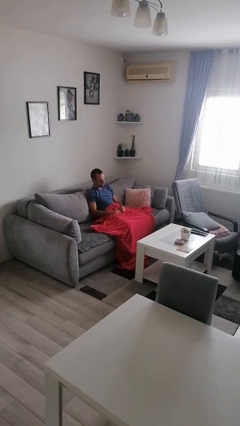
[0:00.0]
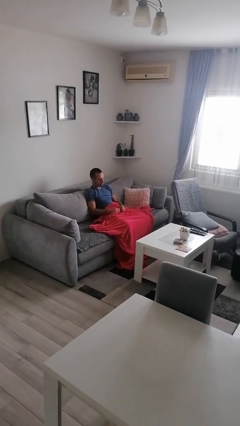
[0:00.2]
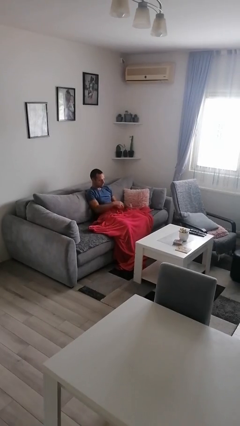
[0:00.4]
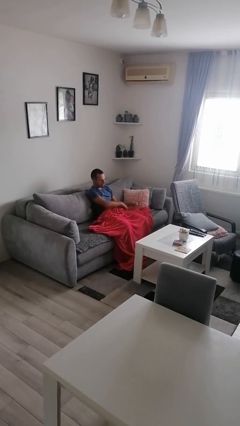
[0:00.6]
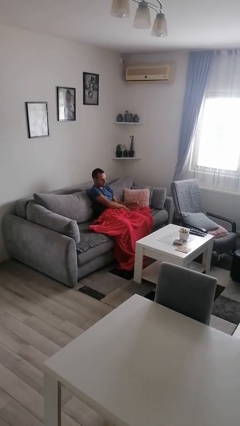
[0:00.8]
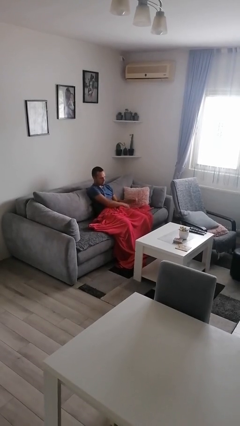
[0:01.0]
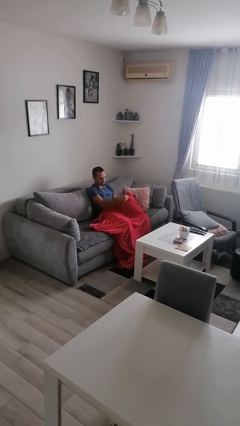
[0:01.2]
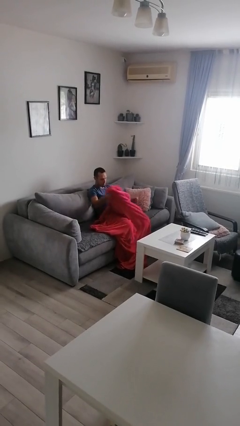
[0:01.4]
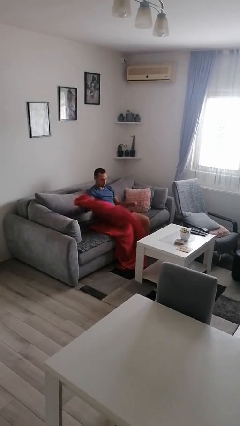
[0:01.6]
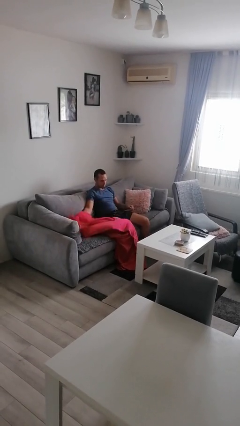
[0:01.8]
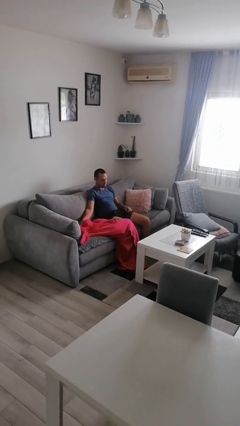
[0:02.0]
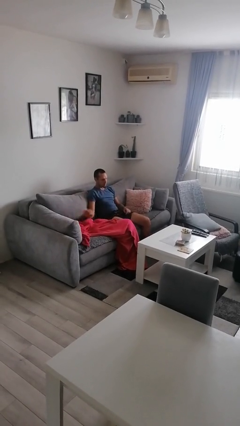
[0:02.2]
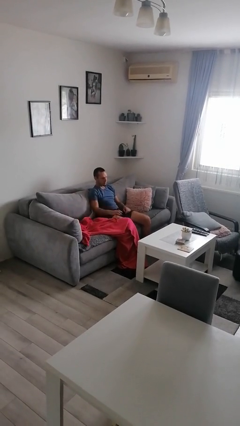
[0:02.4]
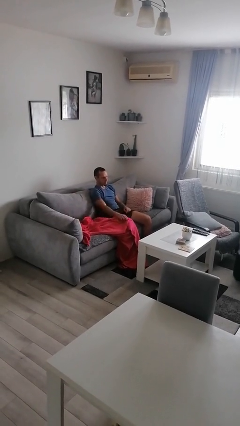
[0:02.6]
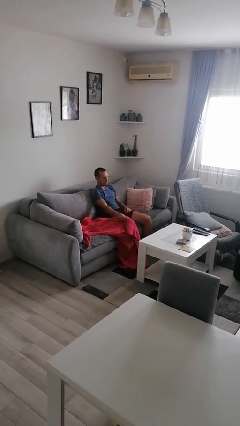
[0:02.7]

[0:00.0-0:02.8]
person uncovers with blanket

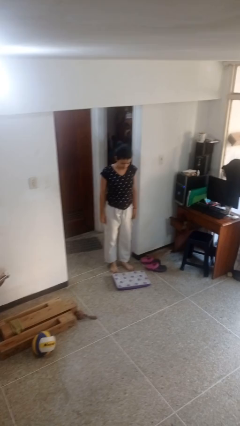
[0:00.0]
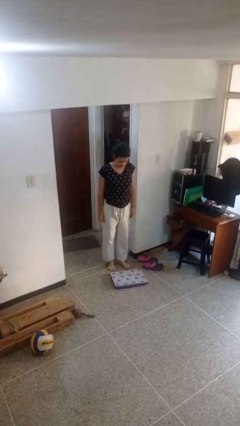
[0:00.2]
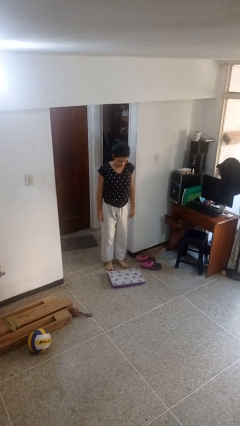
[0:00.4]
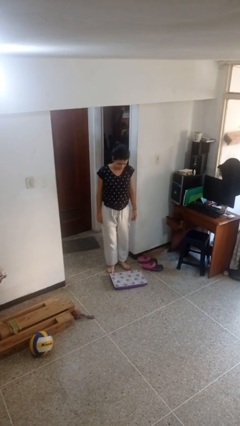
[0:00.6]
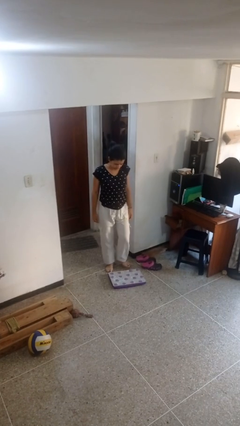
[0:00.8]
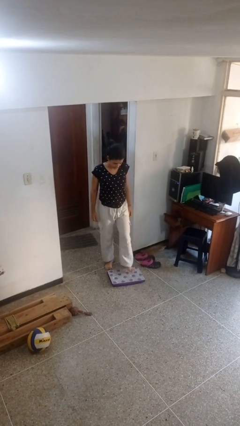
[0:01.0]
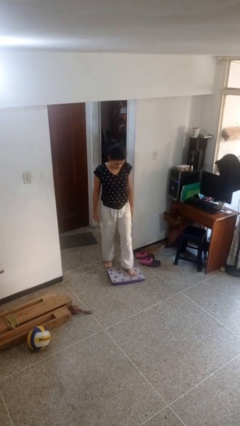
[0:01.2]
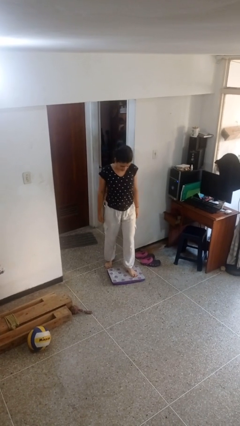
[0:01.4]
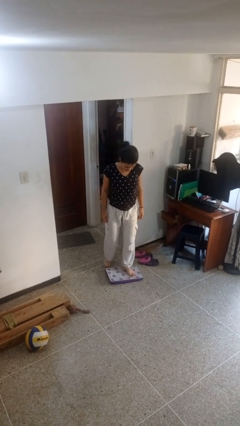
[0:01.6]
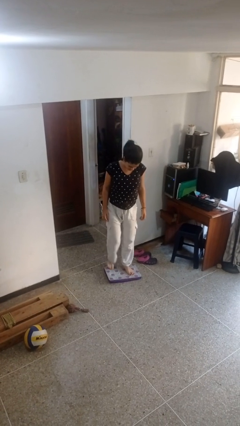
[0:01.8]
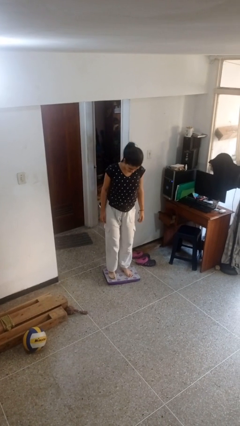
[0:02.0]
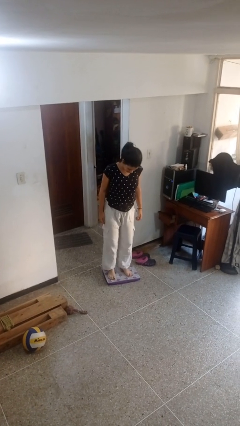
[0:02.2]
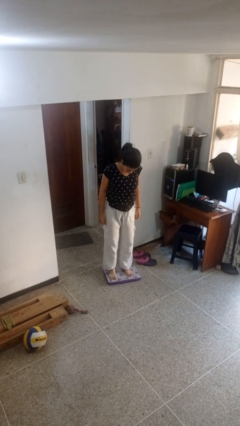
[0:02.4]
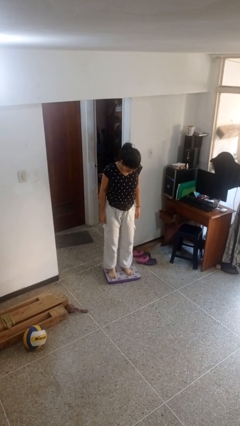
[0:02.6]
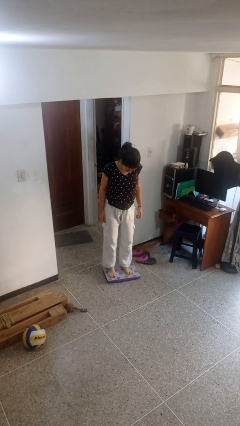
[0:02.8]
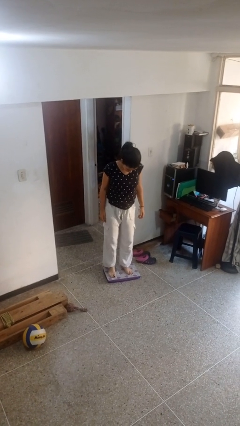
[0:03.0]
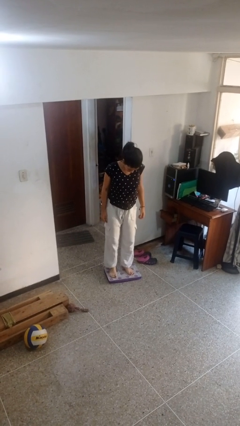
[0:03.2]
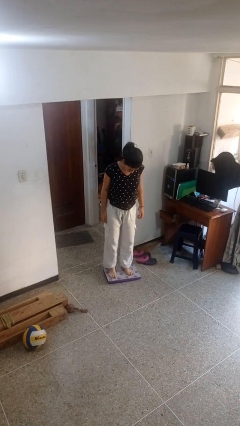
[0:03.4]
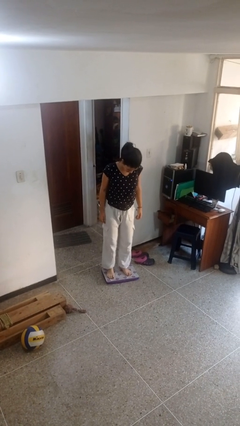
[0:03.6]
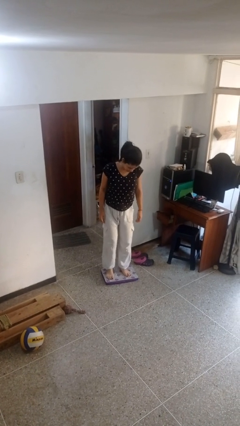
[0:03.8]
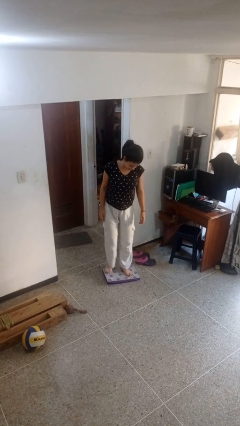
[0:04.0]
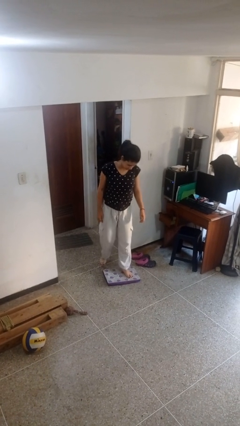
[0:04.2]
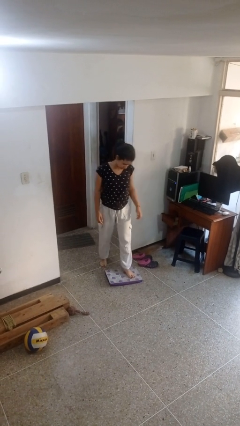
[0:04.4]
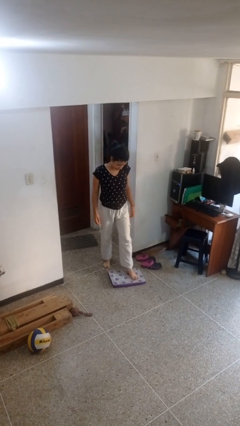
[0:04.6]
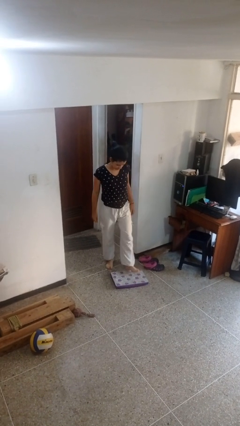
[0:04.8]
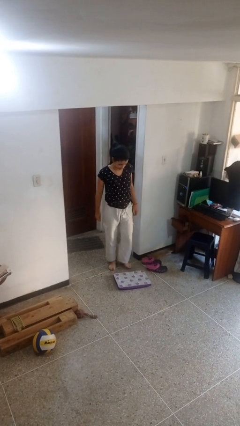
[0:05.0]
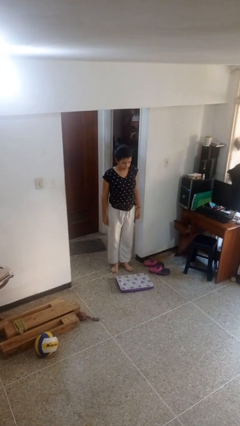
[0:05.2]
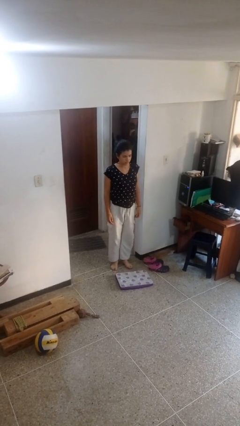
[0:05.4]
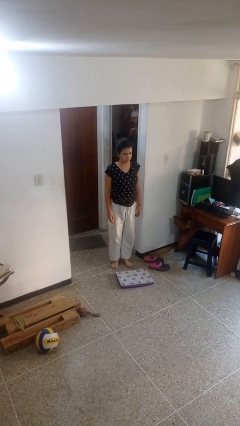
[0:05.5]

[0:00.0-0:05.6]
person uses bodyweight scale

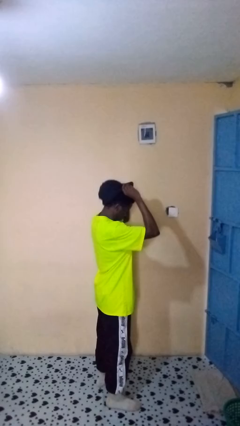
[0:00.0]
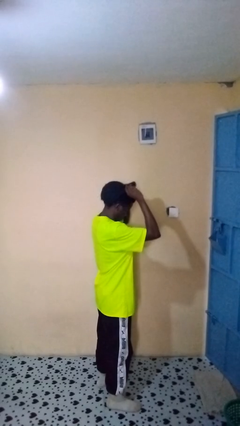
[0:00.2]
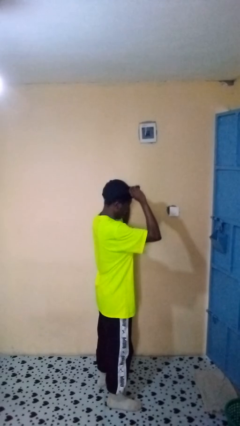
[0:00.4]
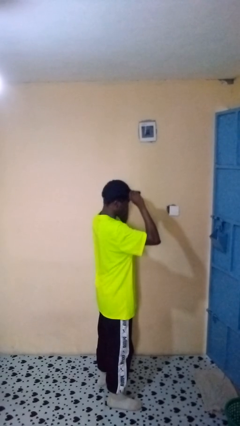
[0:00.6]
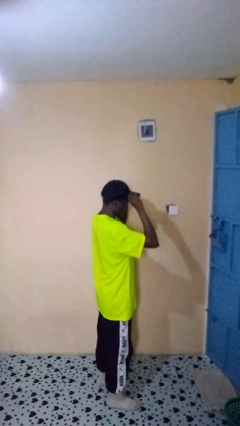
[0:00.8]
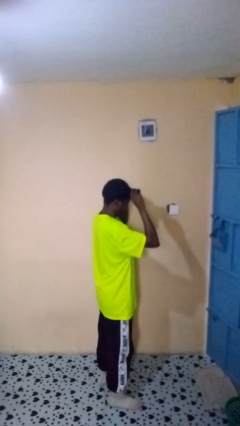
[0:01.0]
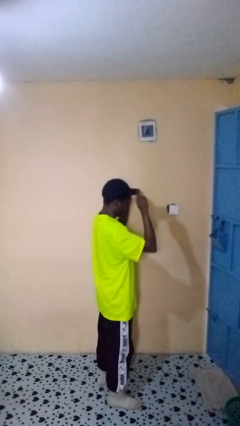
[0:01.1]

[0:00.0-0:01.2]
person puts on hat

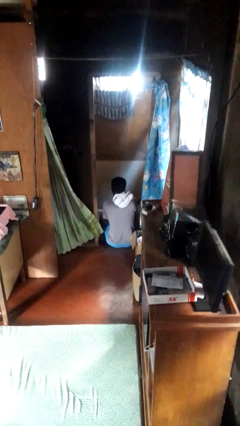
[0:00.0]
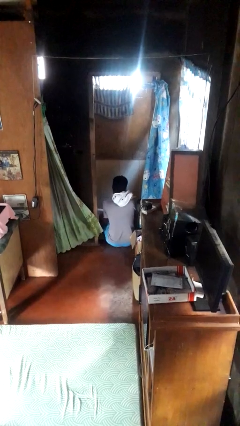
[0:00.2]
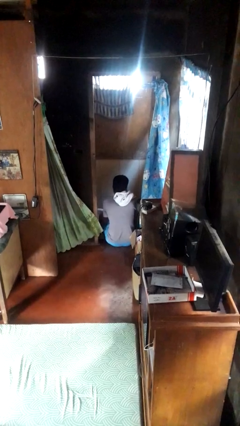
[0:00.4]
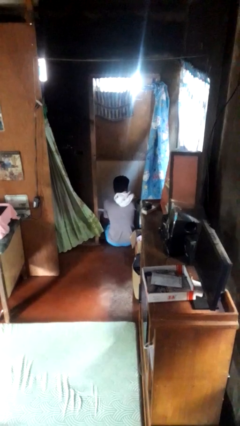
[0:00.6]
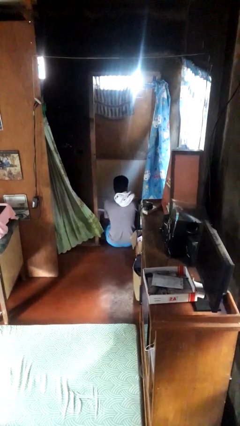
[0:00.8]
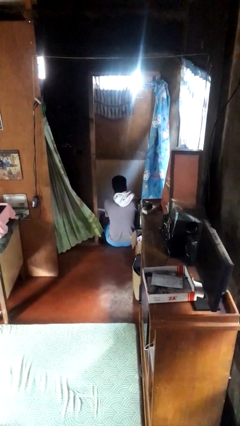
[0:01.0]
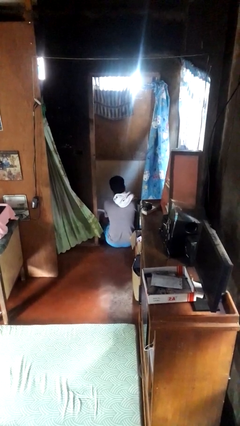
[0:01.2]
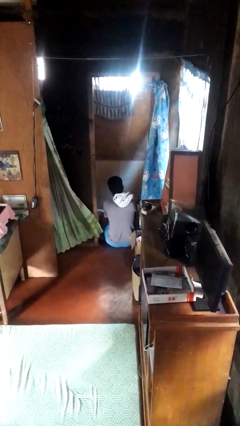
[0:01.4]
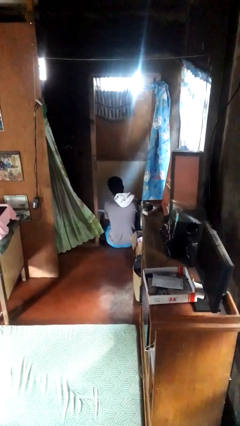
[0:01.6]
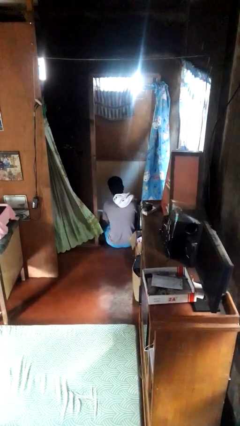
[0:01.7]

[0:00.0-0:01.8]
person dries face with towel

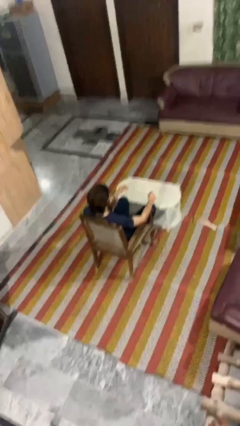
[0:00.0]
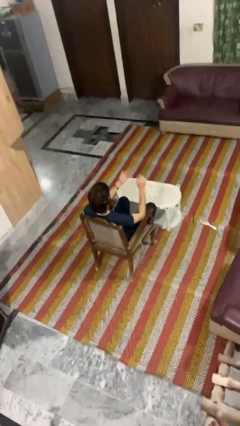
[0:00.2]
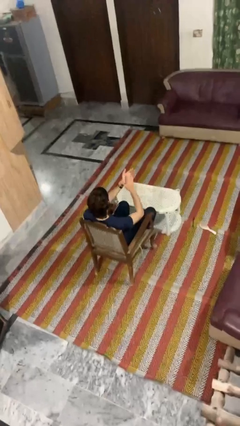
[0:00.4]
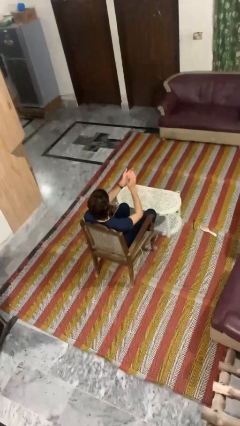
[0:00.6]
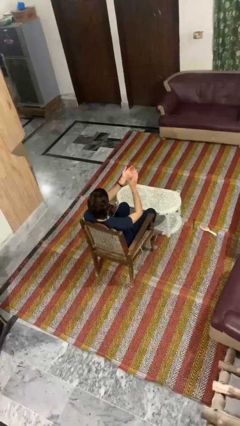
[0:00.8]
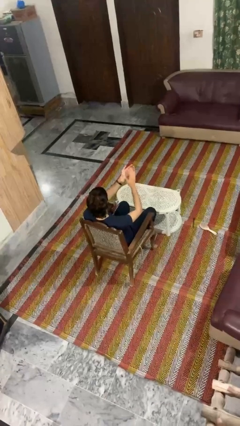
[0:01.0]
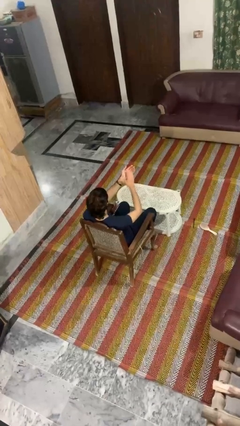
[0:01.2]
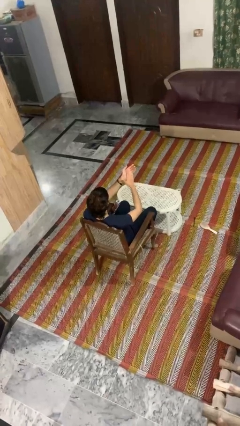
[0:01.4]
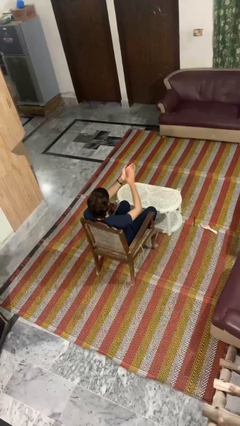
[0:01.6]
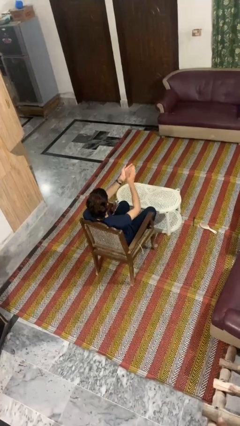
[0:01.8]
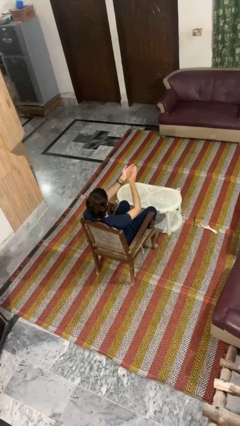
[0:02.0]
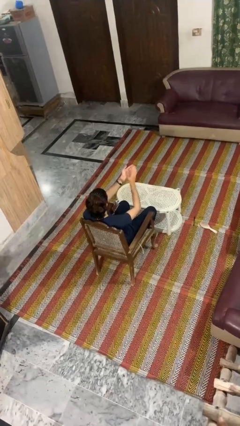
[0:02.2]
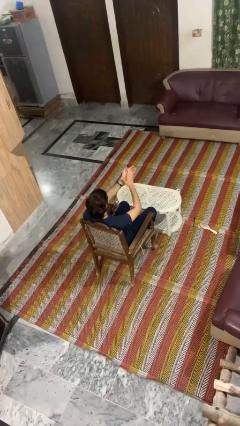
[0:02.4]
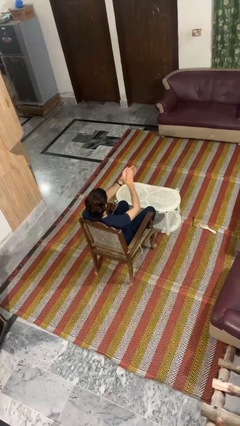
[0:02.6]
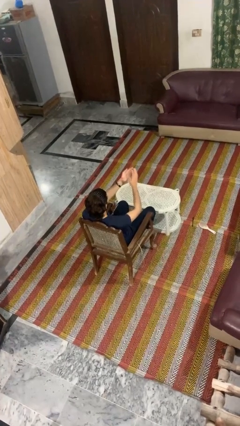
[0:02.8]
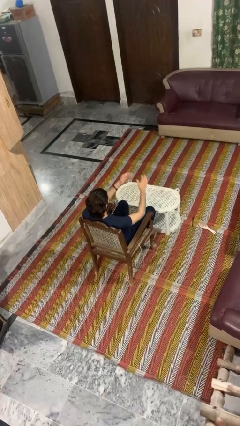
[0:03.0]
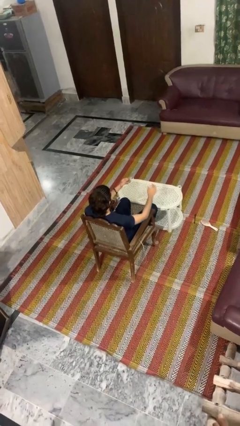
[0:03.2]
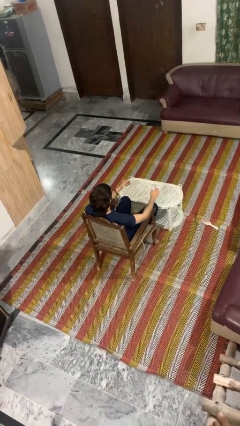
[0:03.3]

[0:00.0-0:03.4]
person claps hands

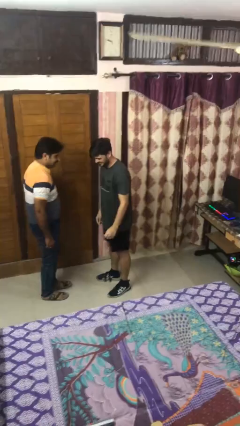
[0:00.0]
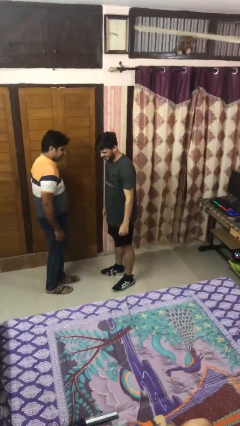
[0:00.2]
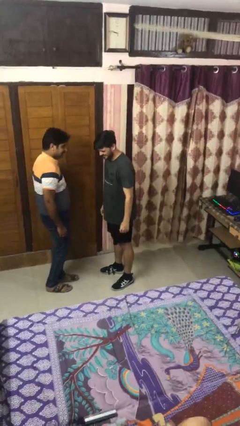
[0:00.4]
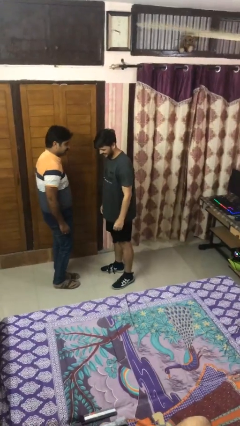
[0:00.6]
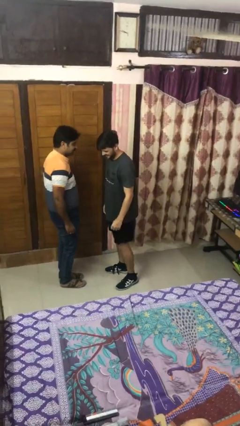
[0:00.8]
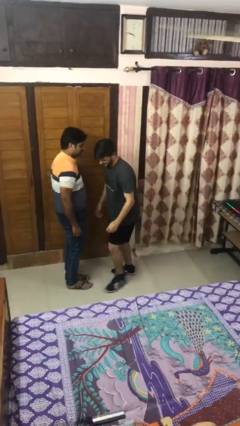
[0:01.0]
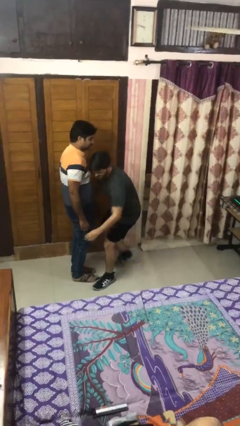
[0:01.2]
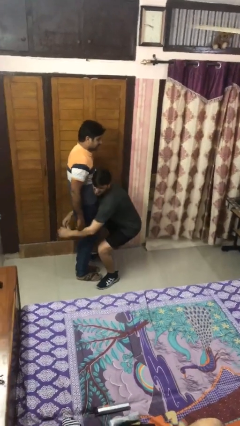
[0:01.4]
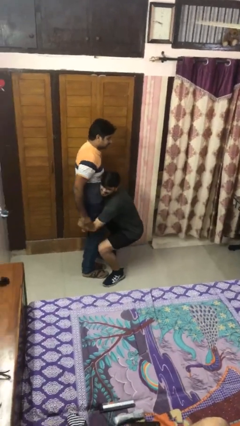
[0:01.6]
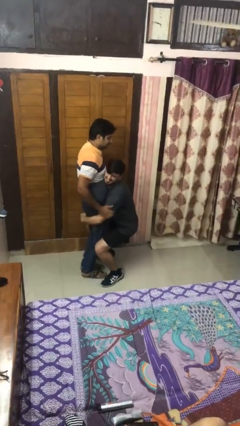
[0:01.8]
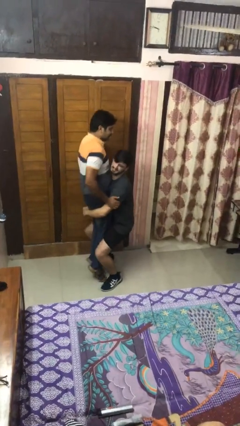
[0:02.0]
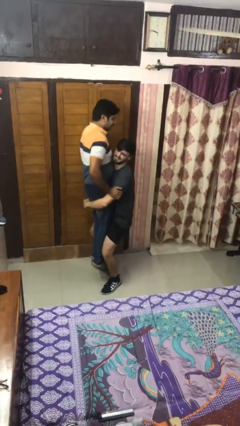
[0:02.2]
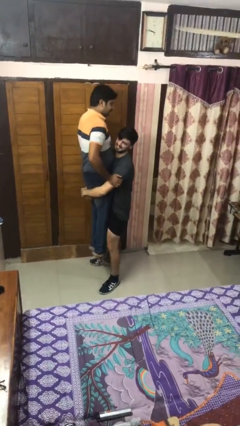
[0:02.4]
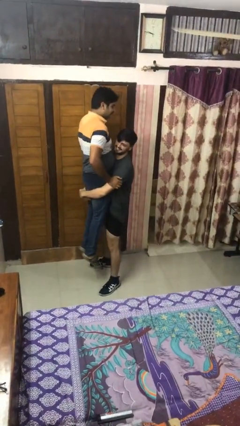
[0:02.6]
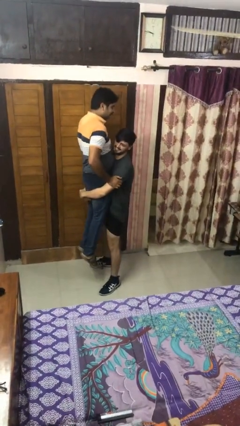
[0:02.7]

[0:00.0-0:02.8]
person picks up person
